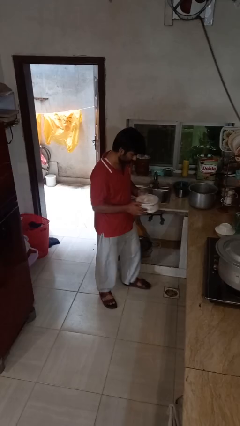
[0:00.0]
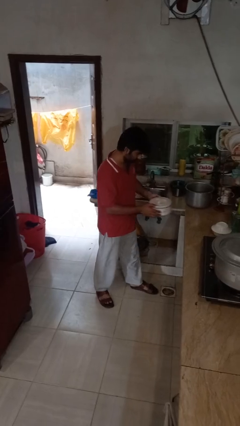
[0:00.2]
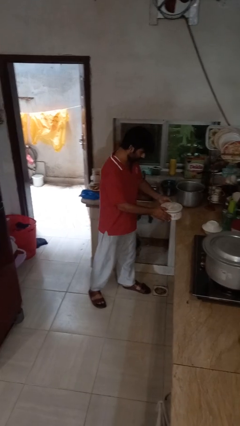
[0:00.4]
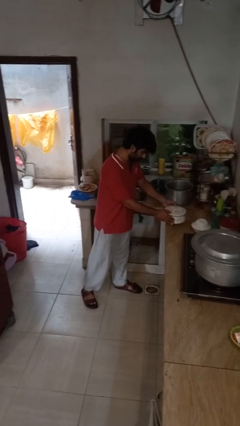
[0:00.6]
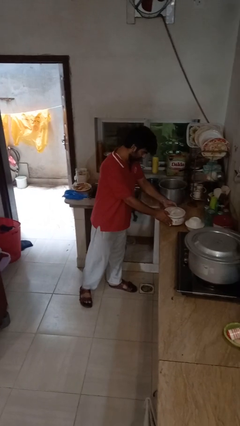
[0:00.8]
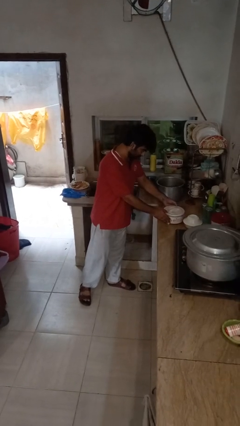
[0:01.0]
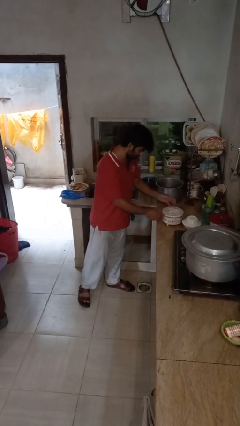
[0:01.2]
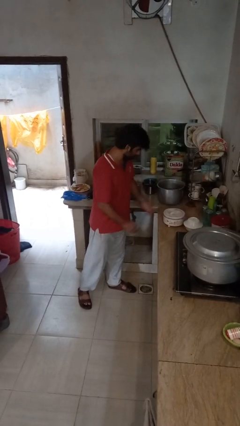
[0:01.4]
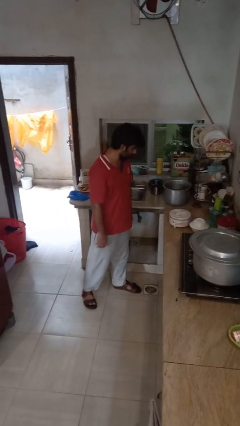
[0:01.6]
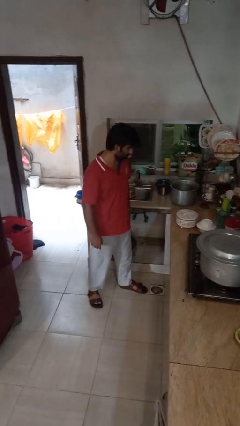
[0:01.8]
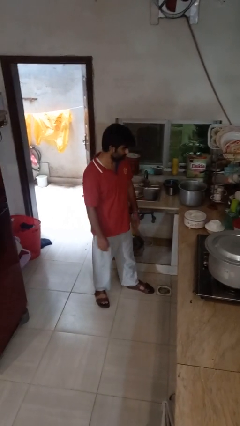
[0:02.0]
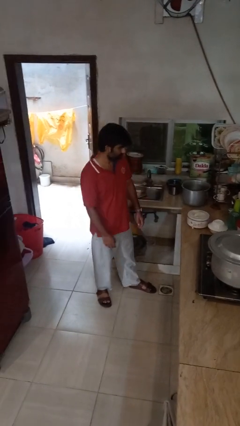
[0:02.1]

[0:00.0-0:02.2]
person puts down object on countertop

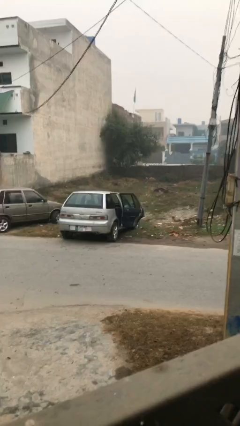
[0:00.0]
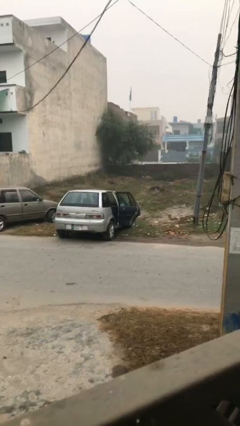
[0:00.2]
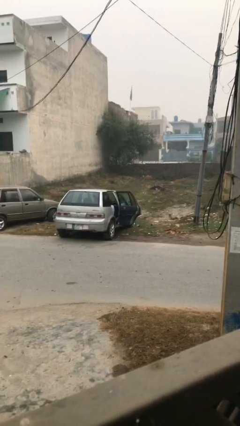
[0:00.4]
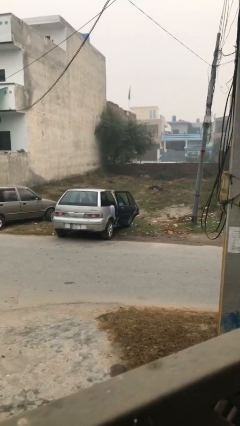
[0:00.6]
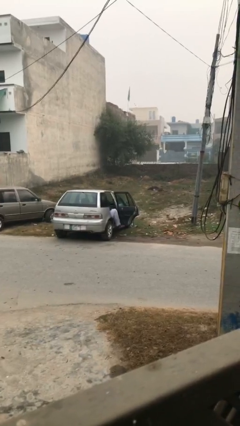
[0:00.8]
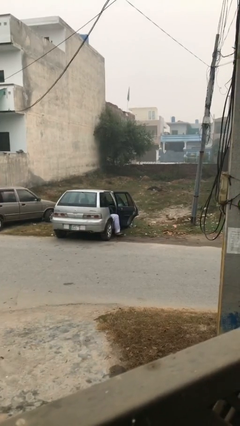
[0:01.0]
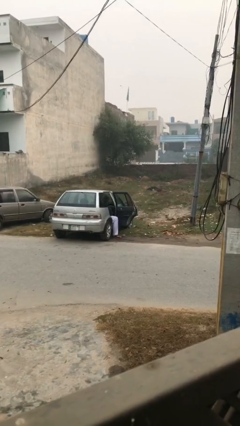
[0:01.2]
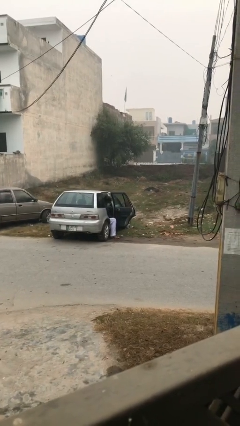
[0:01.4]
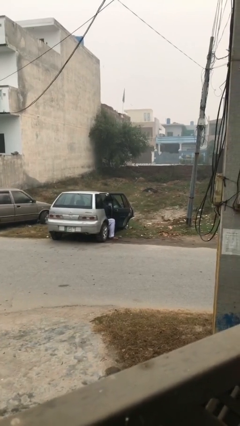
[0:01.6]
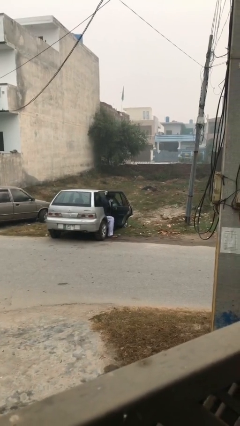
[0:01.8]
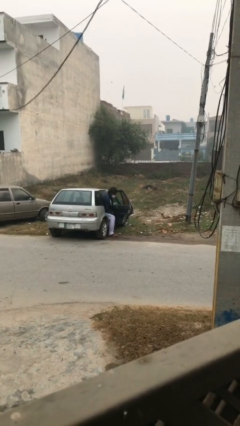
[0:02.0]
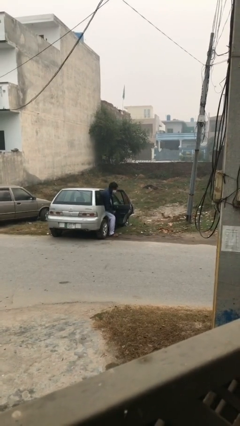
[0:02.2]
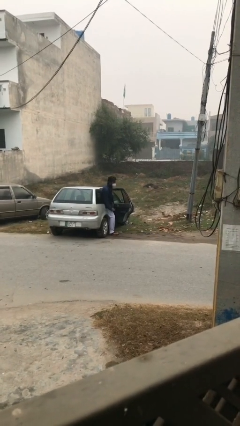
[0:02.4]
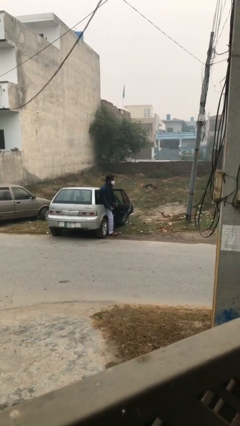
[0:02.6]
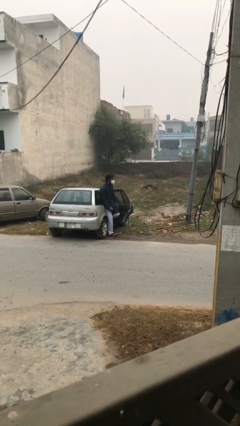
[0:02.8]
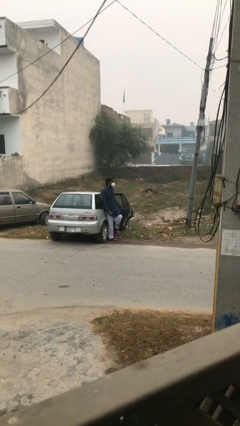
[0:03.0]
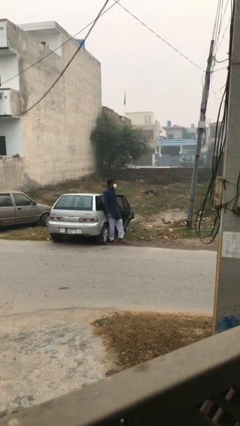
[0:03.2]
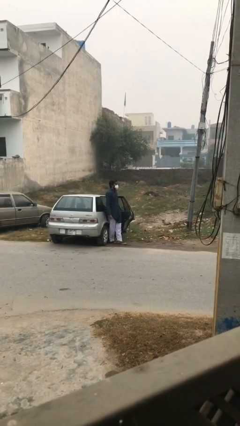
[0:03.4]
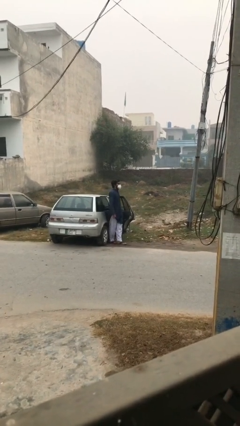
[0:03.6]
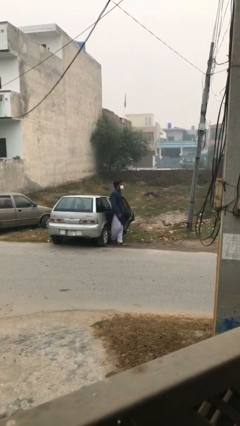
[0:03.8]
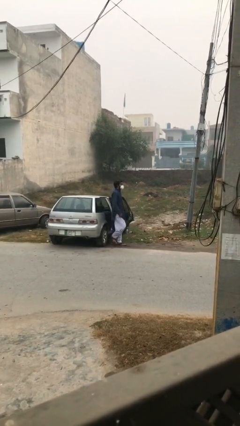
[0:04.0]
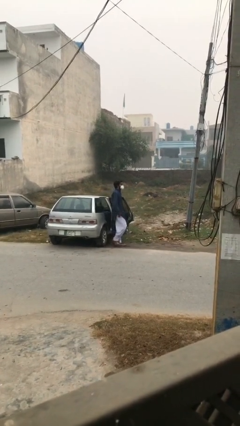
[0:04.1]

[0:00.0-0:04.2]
person exits car

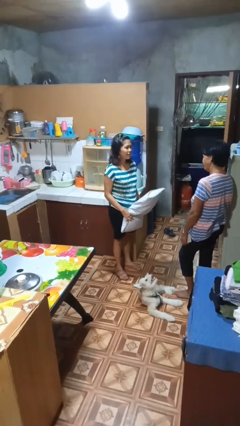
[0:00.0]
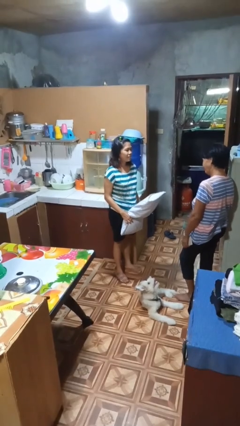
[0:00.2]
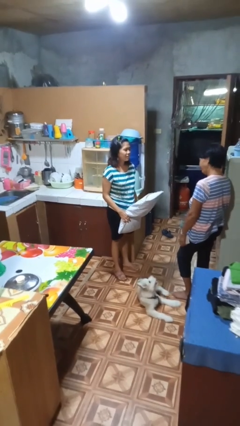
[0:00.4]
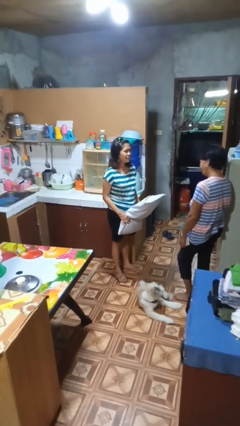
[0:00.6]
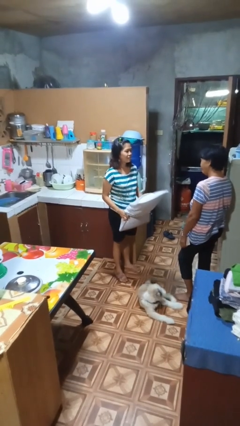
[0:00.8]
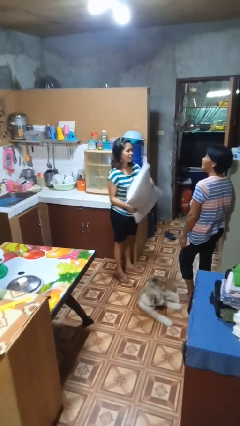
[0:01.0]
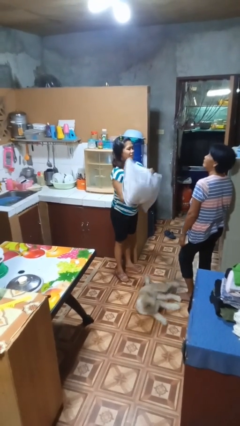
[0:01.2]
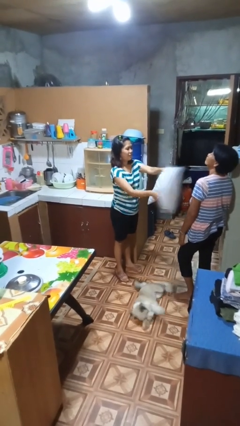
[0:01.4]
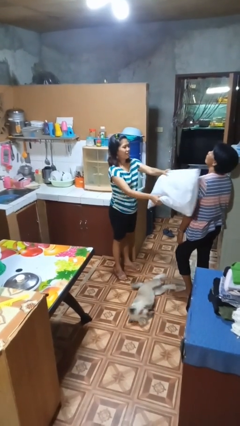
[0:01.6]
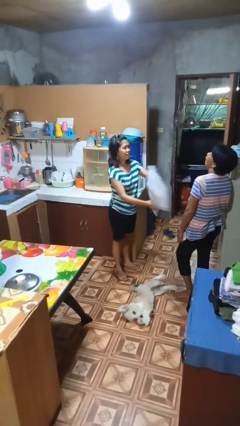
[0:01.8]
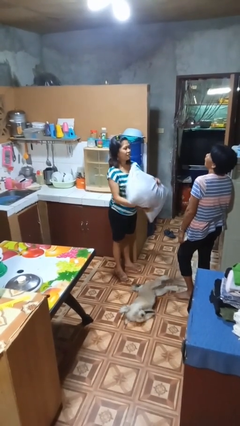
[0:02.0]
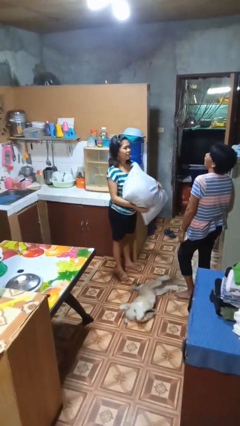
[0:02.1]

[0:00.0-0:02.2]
person hits person with pillow

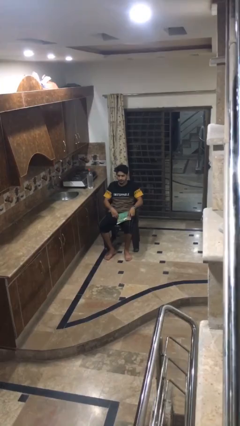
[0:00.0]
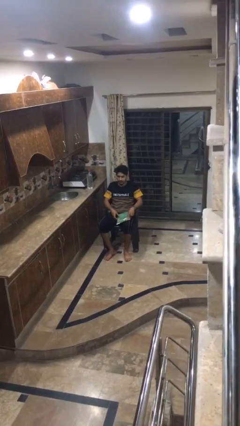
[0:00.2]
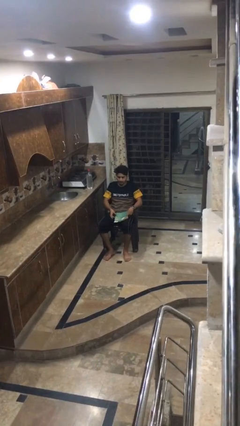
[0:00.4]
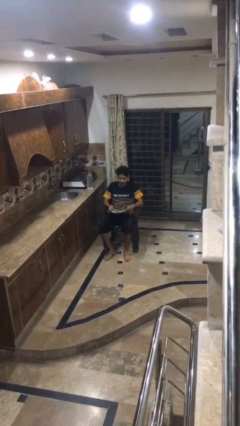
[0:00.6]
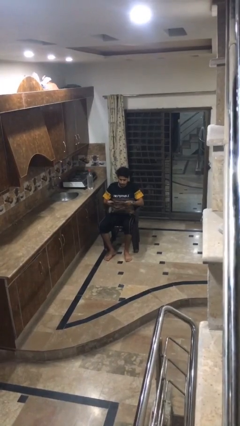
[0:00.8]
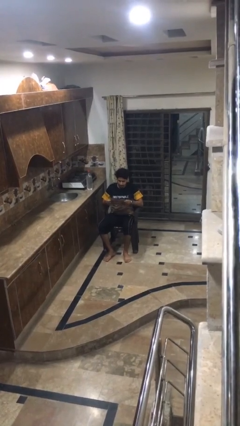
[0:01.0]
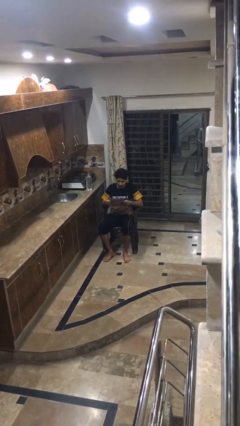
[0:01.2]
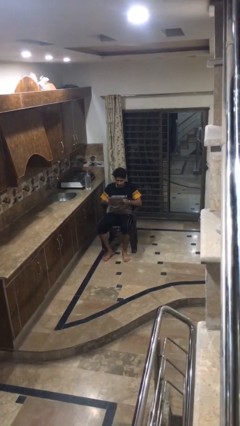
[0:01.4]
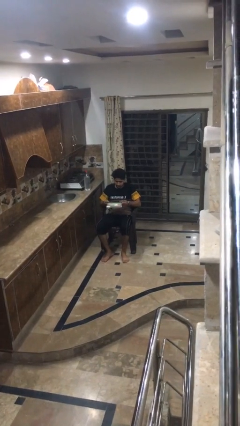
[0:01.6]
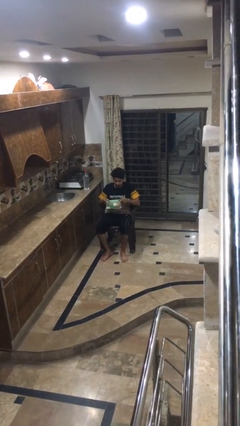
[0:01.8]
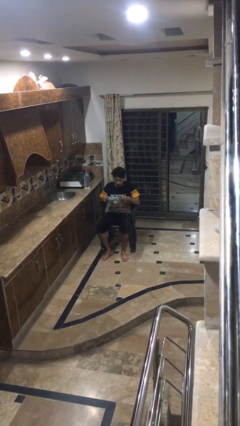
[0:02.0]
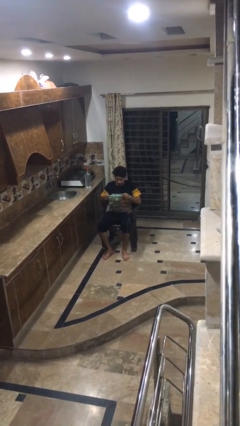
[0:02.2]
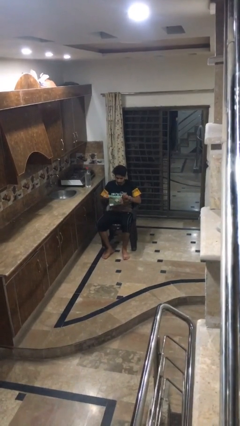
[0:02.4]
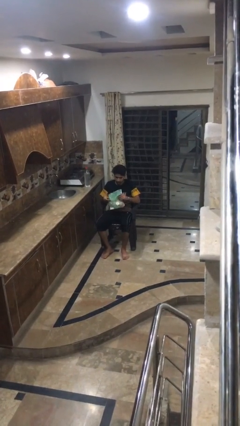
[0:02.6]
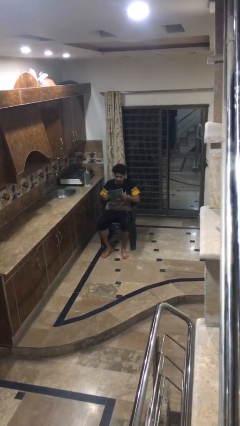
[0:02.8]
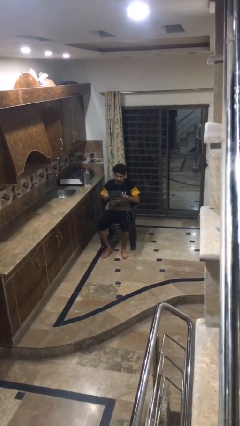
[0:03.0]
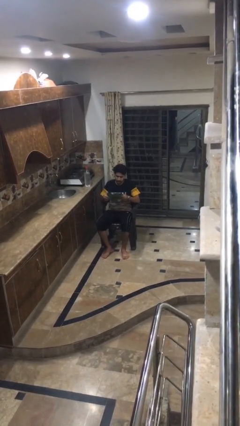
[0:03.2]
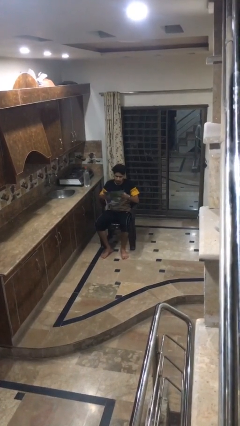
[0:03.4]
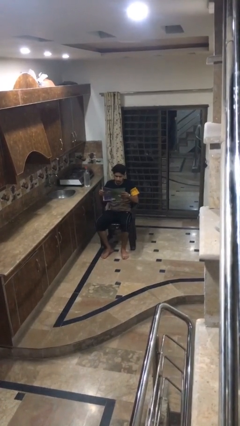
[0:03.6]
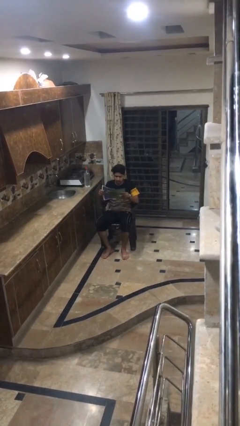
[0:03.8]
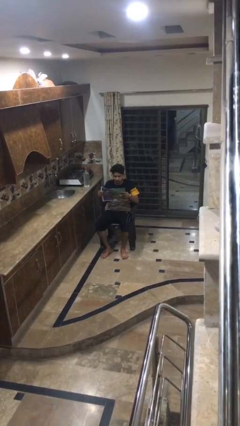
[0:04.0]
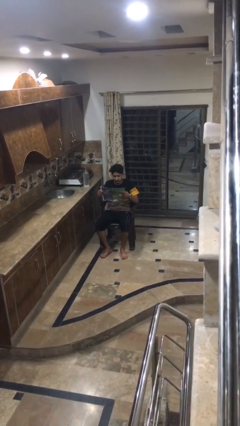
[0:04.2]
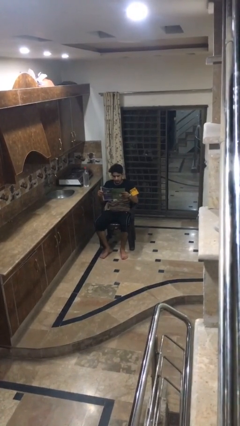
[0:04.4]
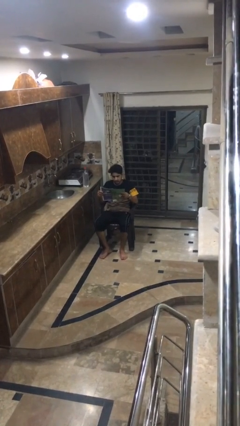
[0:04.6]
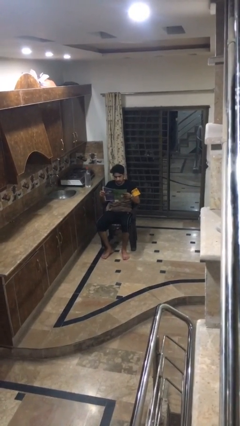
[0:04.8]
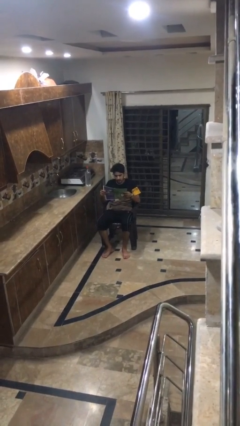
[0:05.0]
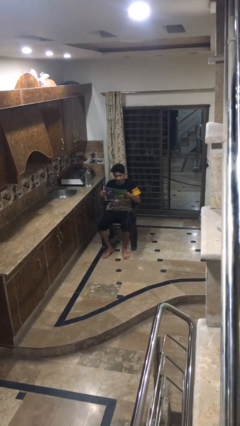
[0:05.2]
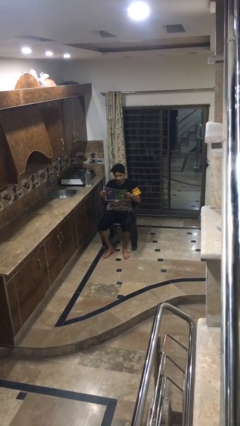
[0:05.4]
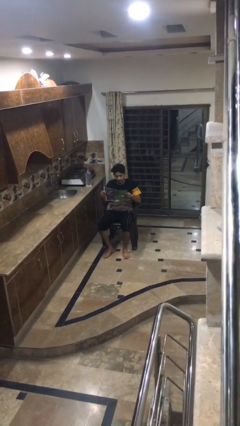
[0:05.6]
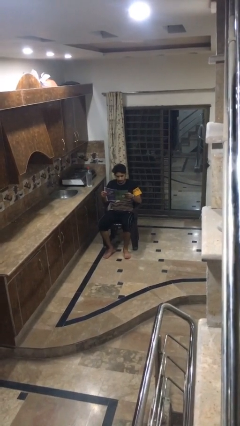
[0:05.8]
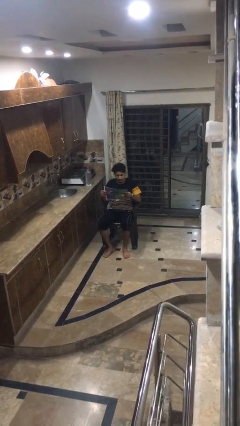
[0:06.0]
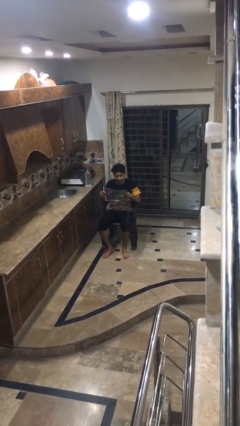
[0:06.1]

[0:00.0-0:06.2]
person reads newspaper

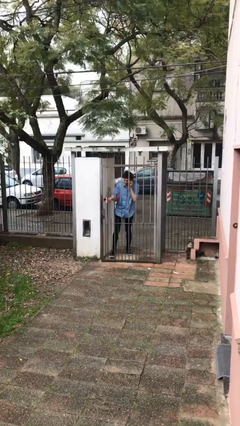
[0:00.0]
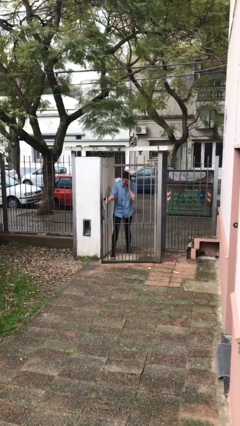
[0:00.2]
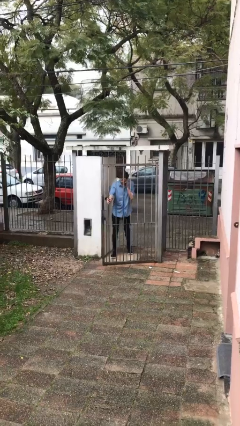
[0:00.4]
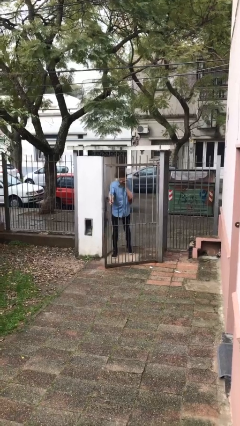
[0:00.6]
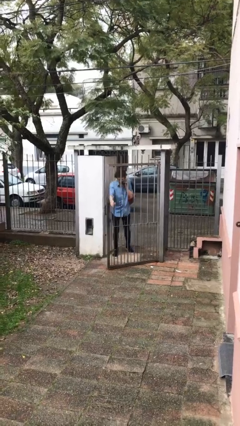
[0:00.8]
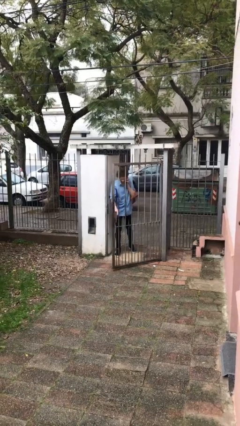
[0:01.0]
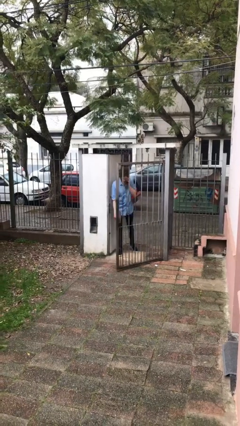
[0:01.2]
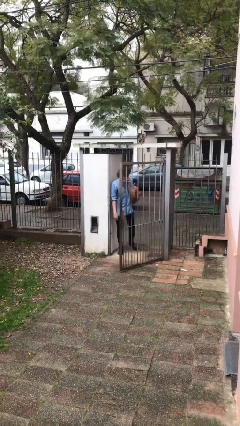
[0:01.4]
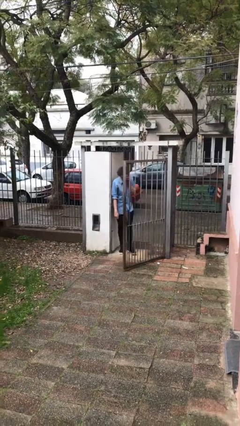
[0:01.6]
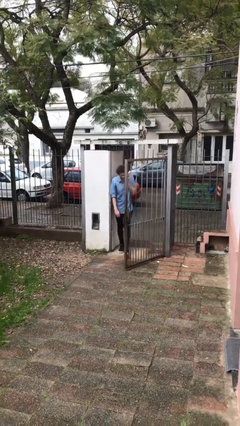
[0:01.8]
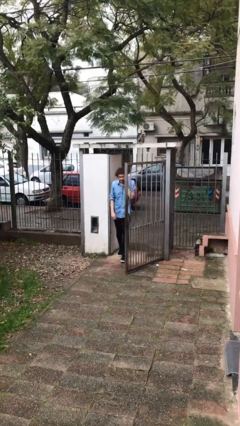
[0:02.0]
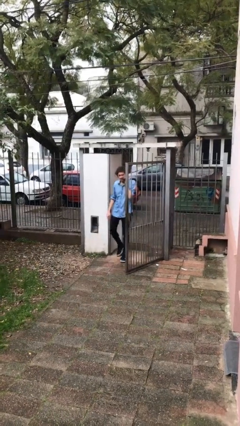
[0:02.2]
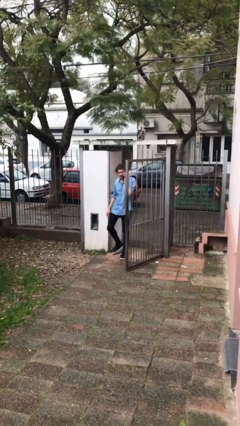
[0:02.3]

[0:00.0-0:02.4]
person opens facility door

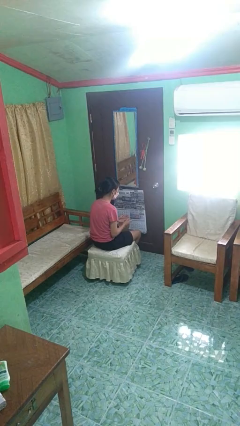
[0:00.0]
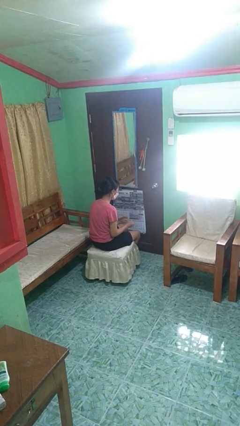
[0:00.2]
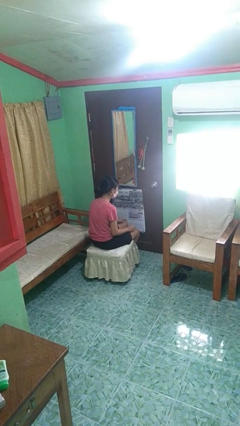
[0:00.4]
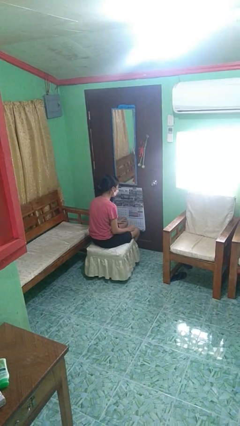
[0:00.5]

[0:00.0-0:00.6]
person takes off ring
